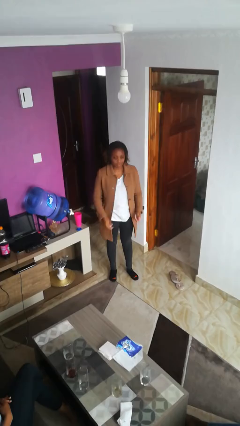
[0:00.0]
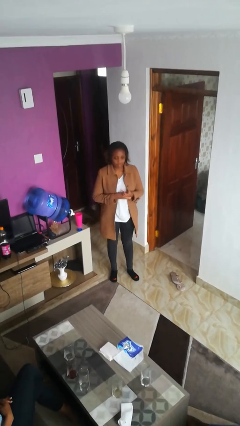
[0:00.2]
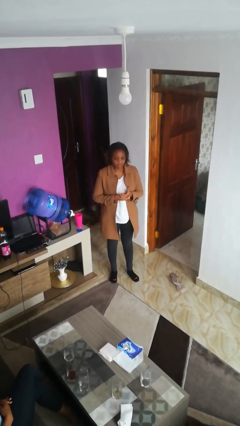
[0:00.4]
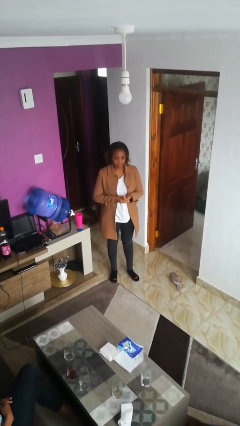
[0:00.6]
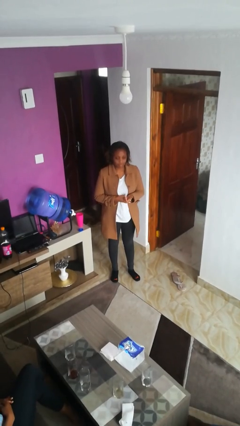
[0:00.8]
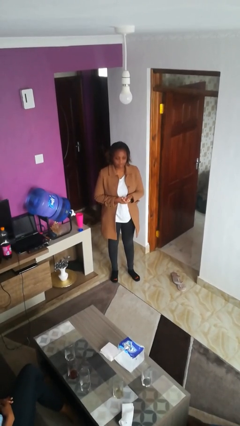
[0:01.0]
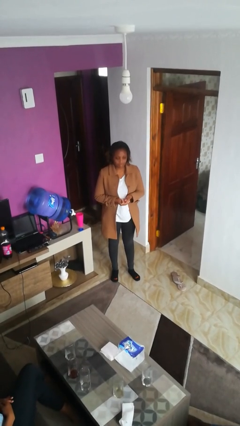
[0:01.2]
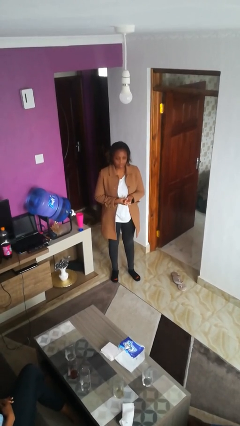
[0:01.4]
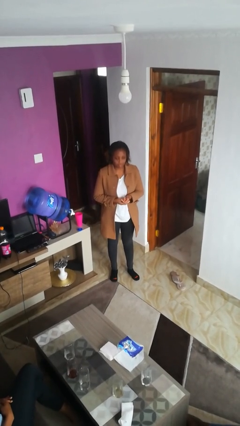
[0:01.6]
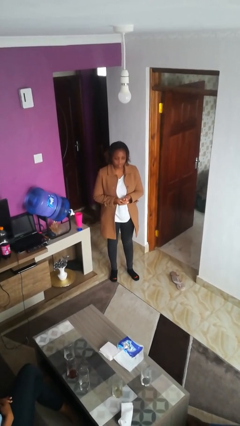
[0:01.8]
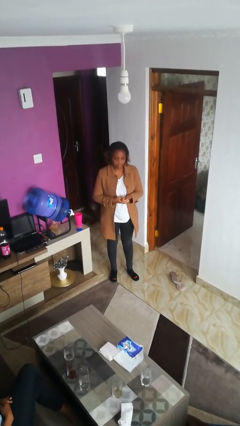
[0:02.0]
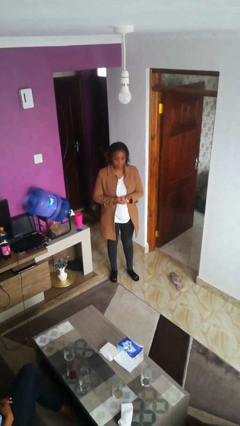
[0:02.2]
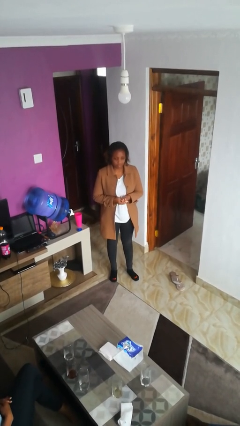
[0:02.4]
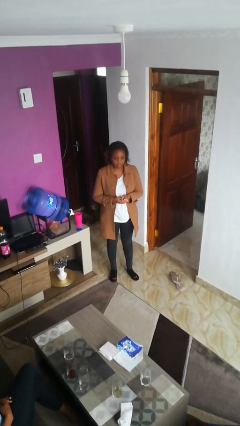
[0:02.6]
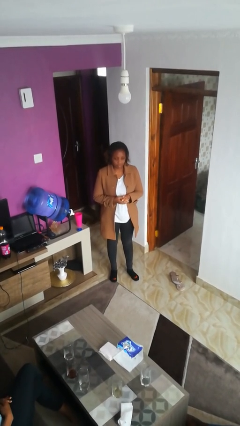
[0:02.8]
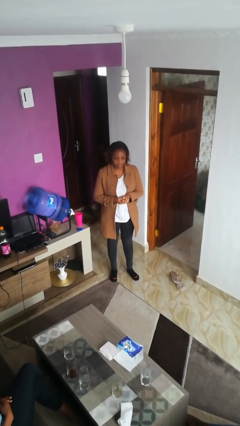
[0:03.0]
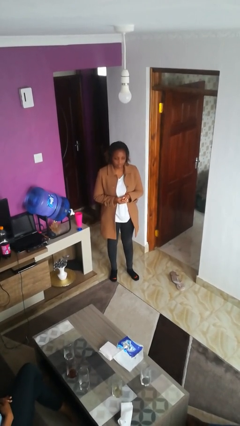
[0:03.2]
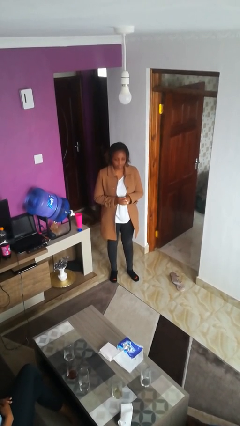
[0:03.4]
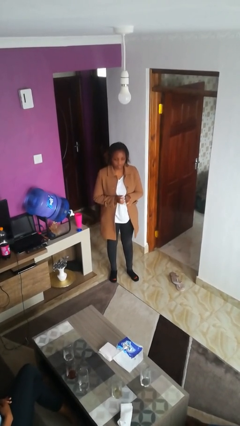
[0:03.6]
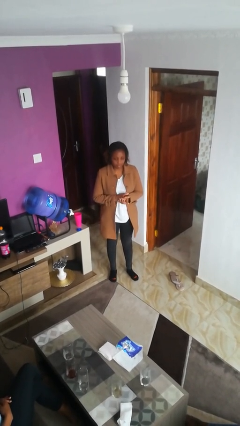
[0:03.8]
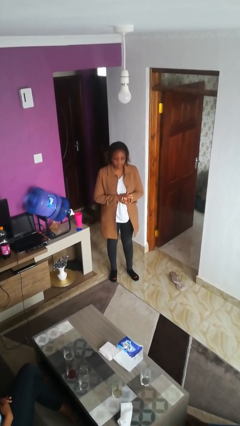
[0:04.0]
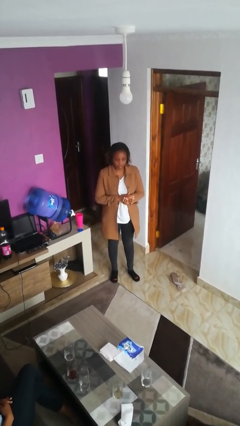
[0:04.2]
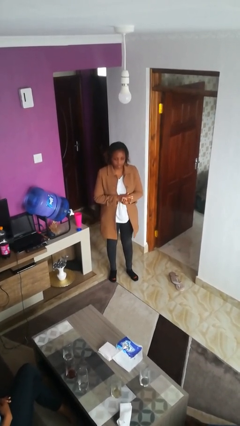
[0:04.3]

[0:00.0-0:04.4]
person cracks knuckles

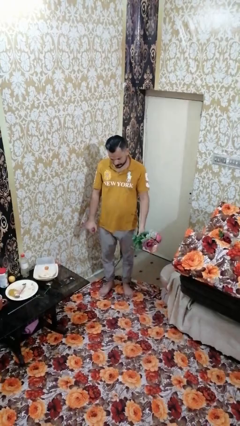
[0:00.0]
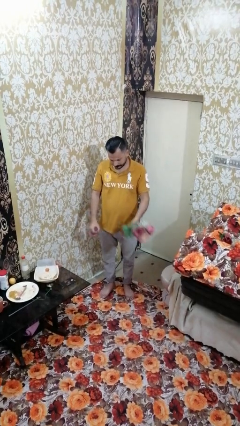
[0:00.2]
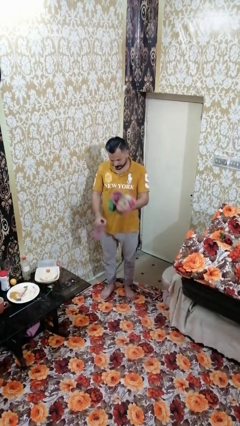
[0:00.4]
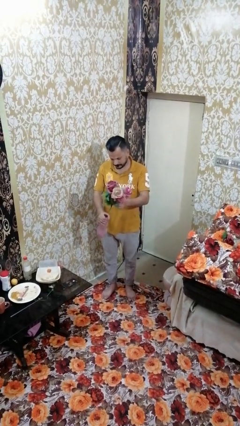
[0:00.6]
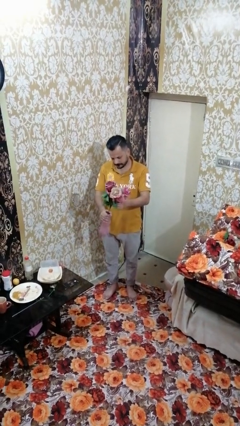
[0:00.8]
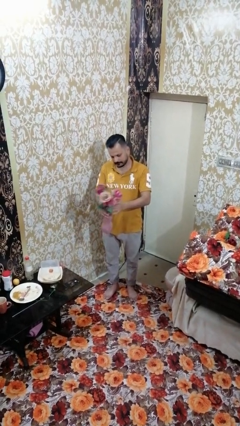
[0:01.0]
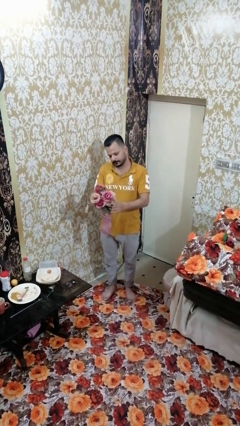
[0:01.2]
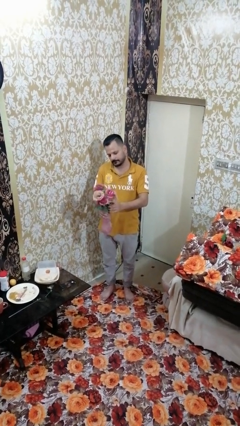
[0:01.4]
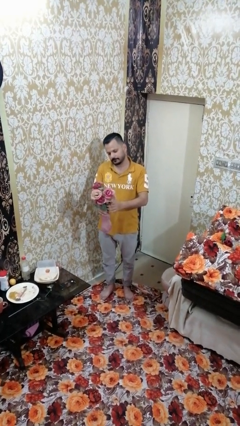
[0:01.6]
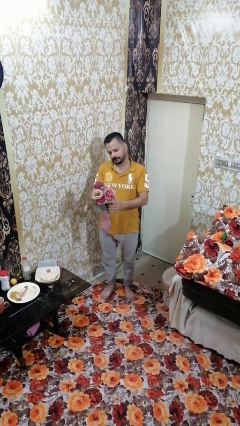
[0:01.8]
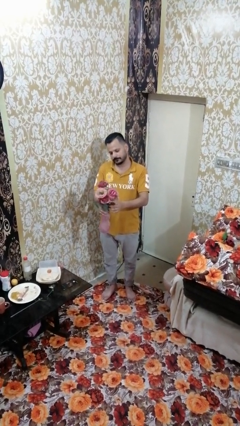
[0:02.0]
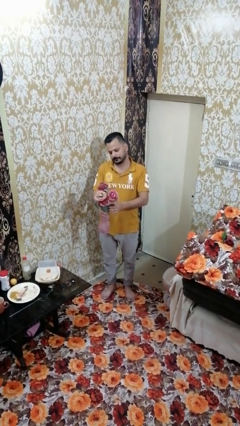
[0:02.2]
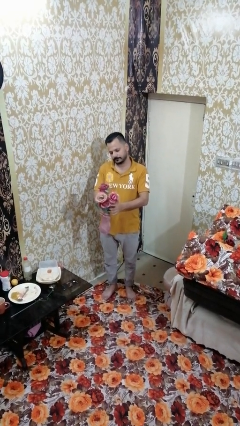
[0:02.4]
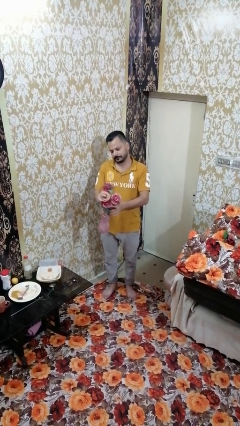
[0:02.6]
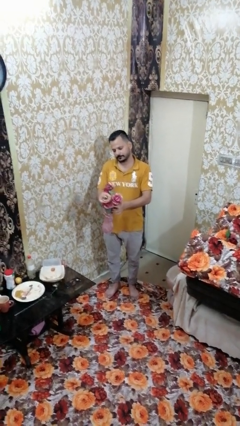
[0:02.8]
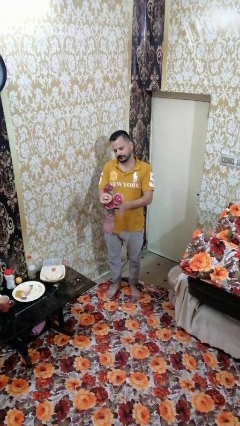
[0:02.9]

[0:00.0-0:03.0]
person arranges flowers in vase

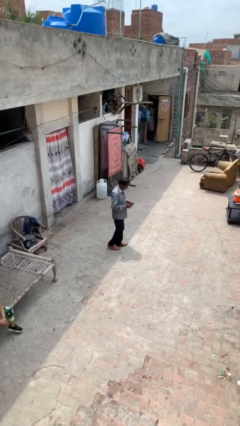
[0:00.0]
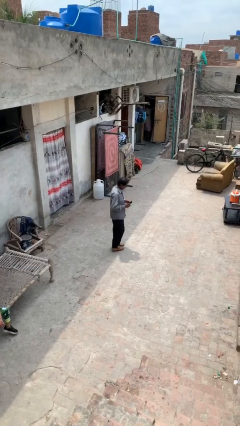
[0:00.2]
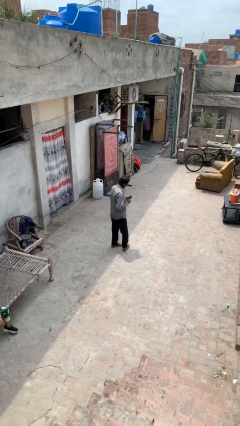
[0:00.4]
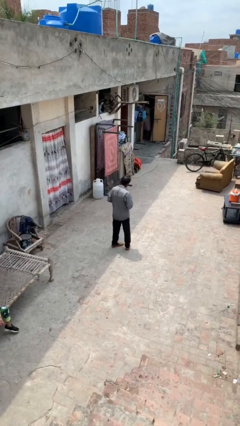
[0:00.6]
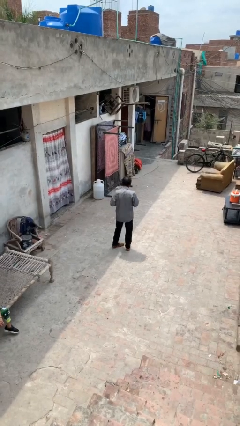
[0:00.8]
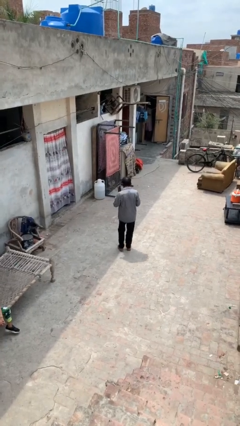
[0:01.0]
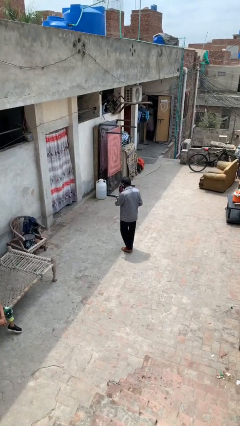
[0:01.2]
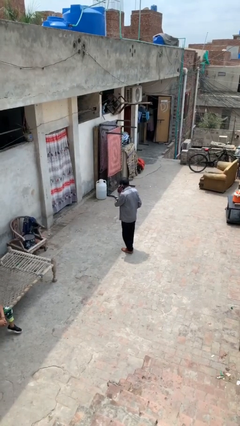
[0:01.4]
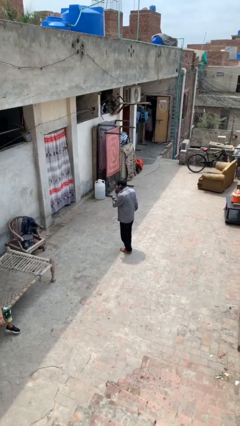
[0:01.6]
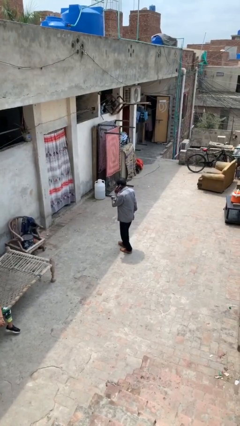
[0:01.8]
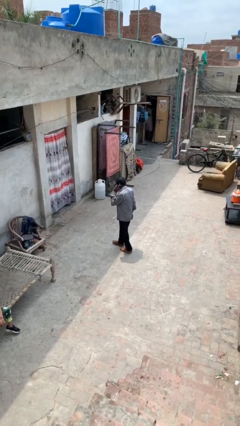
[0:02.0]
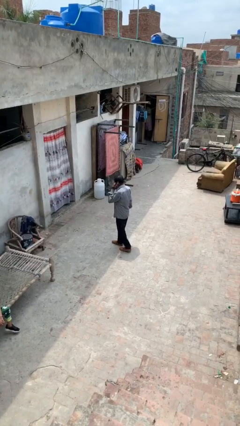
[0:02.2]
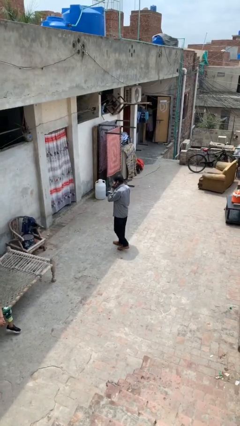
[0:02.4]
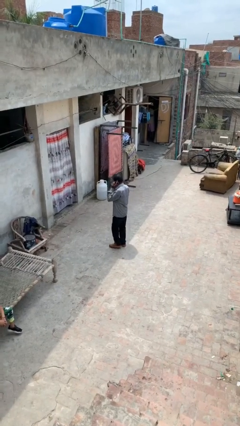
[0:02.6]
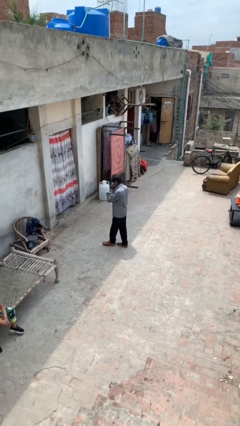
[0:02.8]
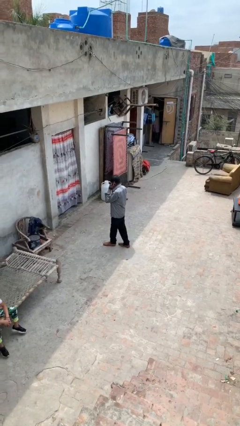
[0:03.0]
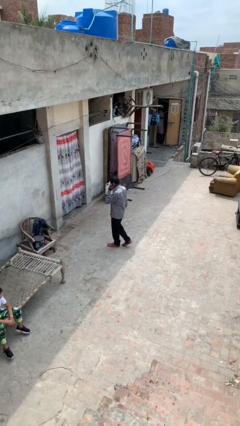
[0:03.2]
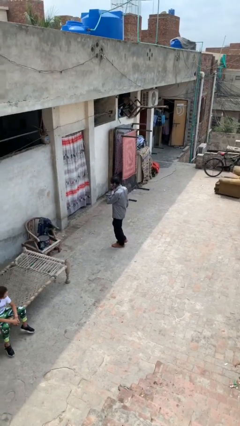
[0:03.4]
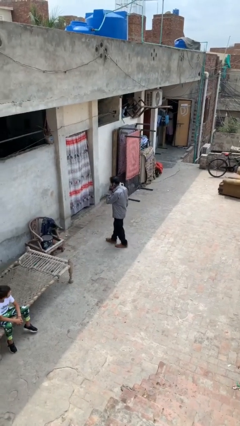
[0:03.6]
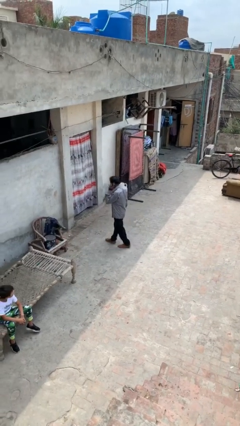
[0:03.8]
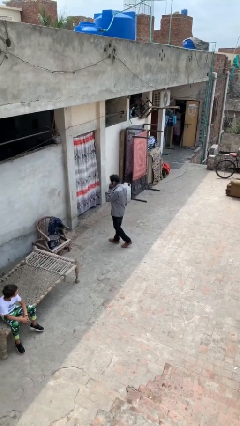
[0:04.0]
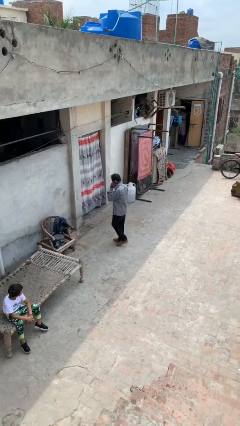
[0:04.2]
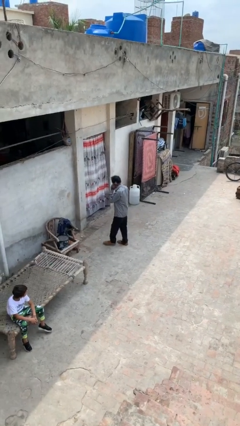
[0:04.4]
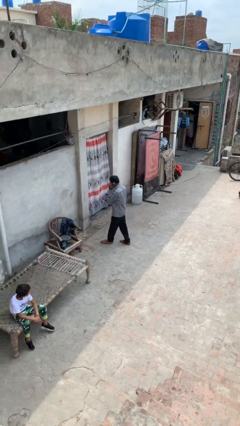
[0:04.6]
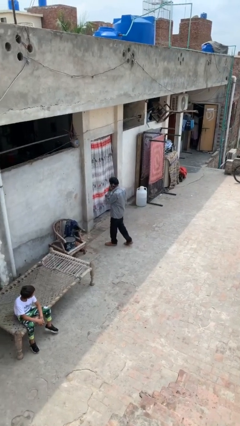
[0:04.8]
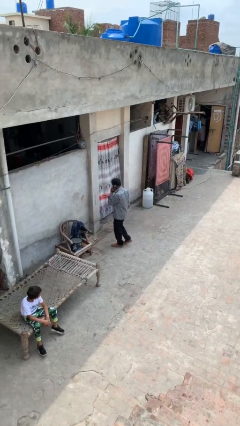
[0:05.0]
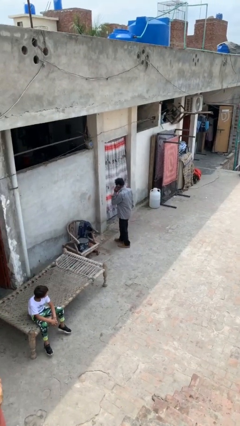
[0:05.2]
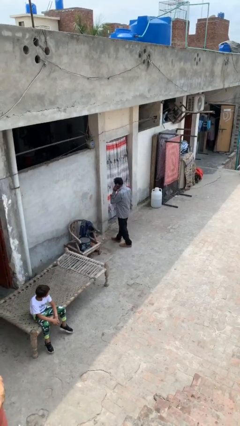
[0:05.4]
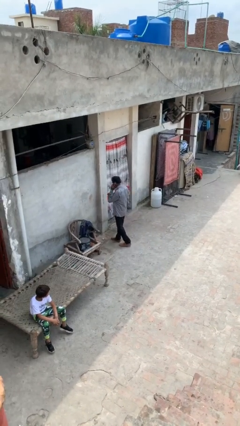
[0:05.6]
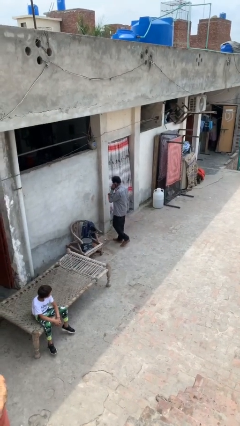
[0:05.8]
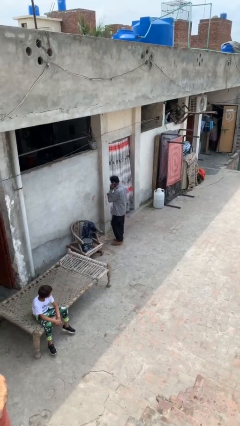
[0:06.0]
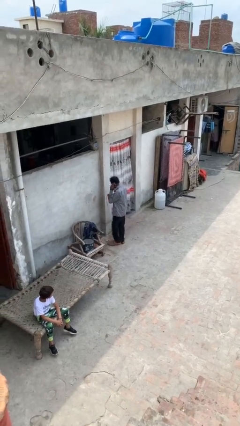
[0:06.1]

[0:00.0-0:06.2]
person talks on phone

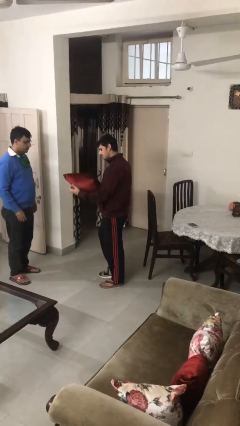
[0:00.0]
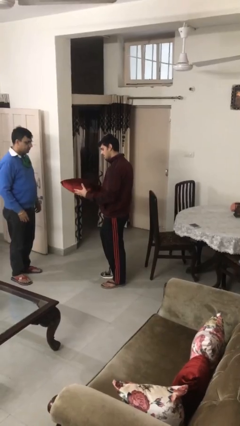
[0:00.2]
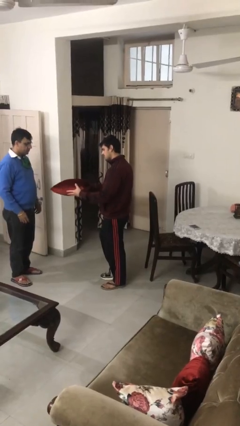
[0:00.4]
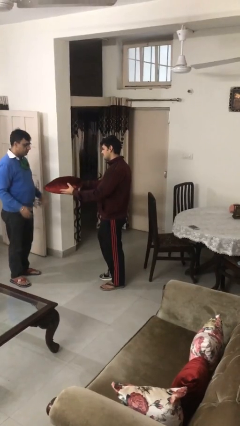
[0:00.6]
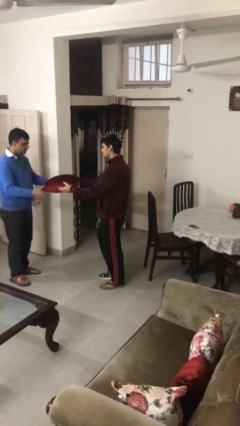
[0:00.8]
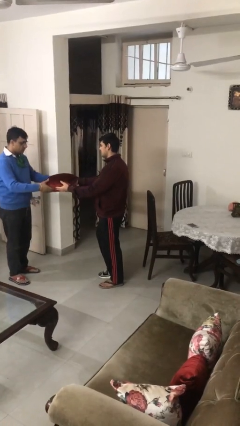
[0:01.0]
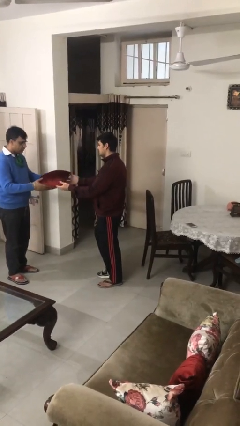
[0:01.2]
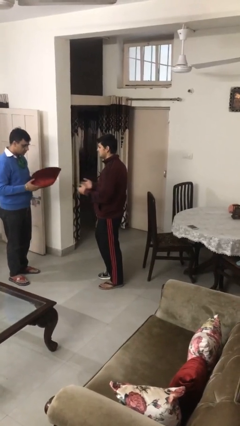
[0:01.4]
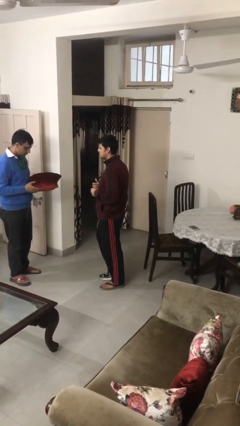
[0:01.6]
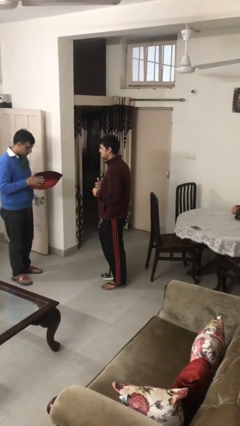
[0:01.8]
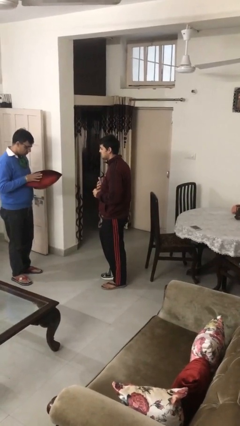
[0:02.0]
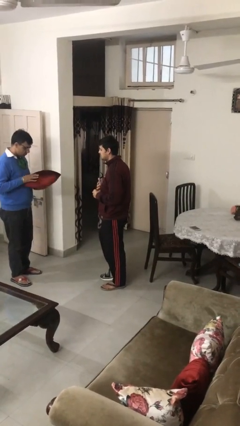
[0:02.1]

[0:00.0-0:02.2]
person transfers object to person

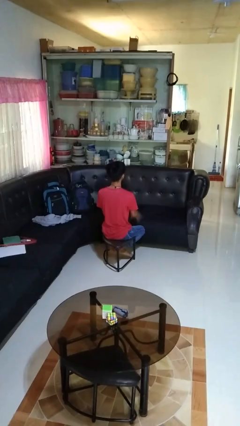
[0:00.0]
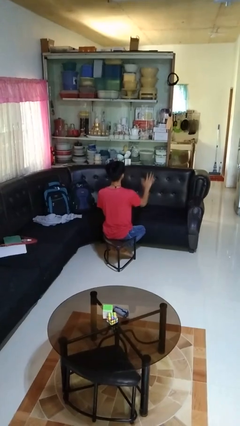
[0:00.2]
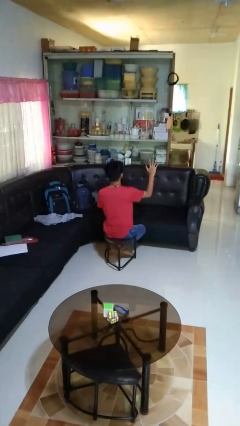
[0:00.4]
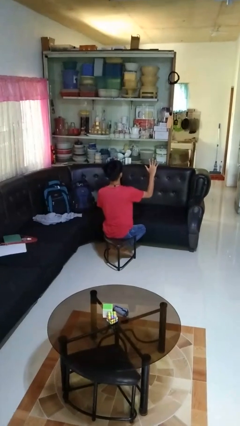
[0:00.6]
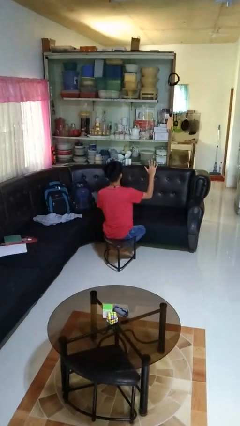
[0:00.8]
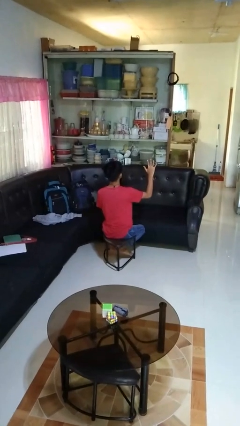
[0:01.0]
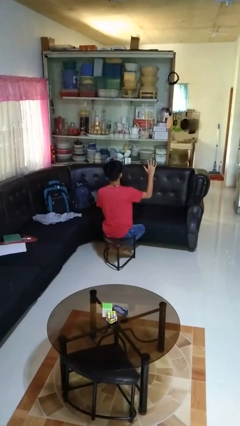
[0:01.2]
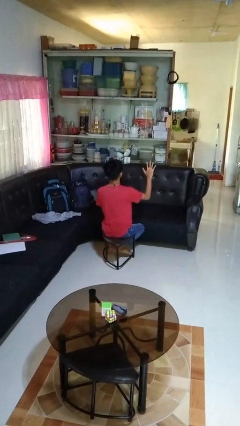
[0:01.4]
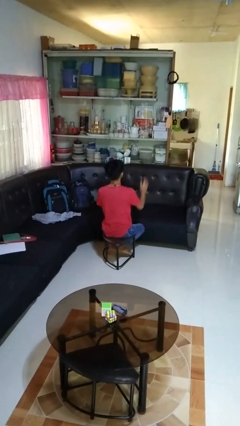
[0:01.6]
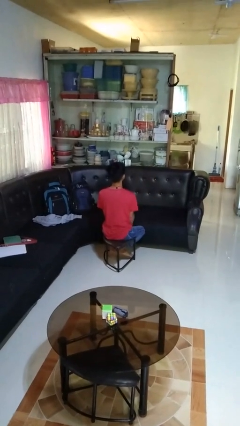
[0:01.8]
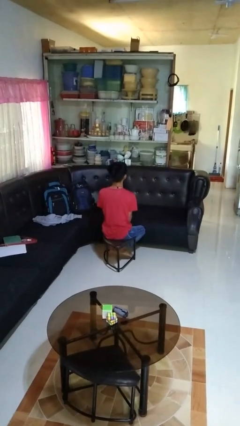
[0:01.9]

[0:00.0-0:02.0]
person gestures number five
